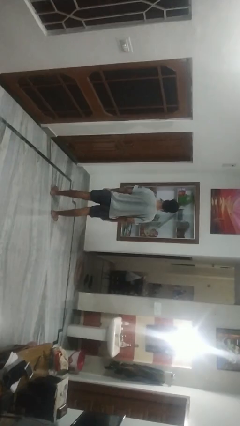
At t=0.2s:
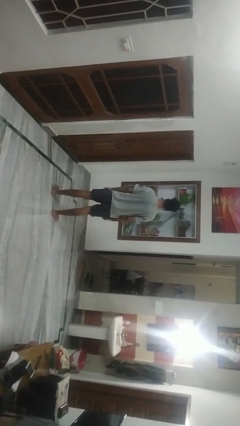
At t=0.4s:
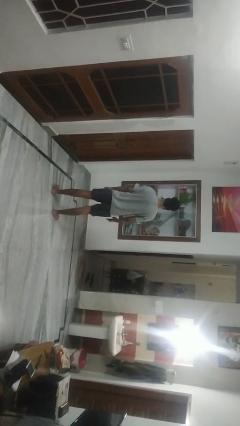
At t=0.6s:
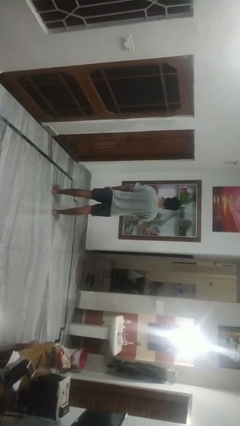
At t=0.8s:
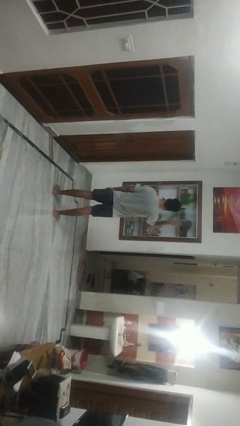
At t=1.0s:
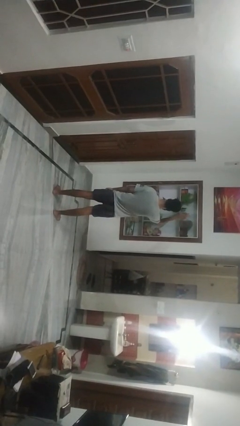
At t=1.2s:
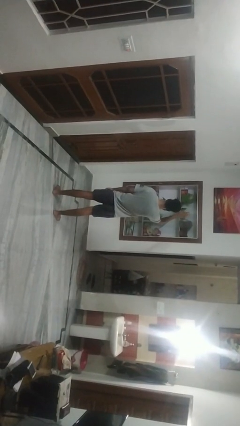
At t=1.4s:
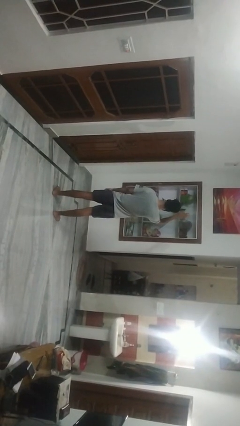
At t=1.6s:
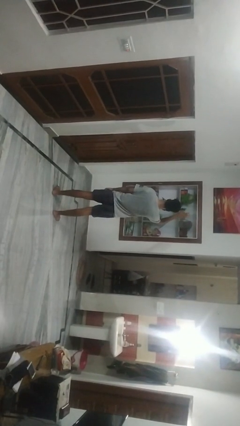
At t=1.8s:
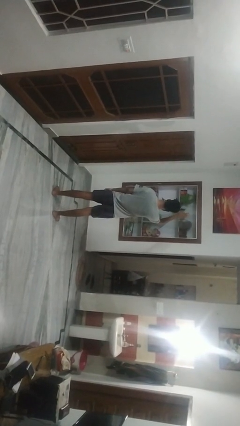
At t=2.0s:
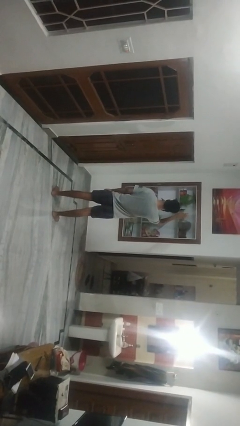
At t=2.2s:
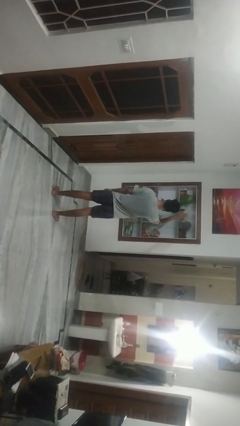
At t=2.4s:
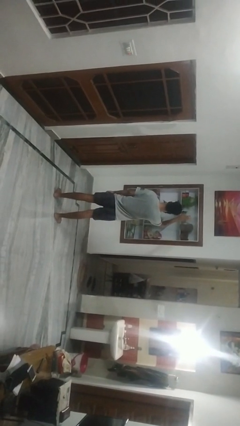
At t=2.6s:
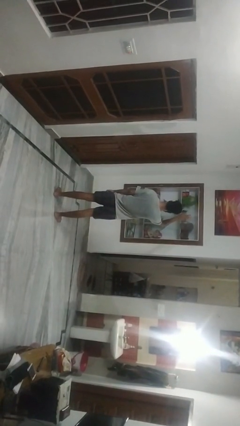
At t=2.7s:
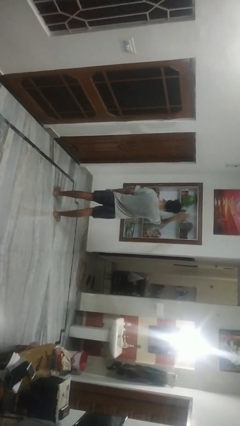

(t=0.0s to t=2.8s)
person gestures raise hand

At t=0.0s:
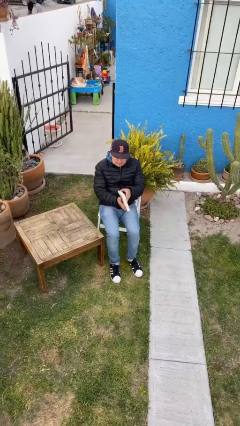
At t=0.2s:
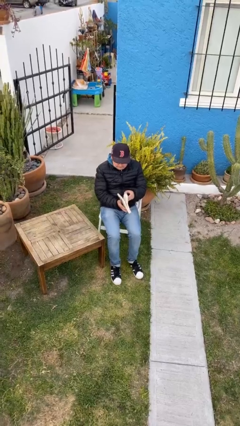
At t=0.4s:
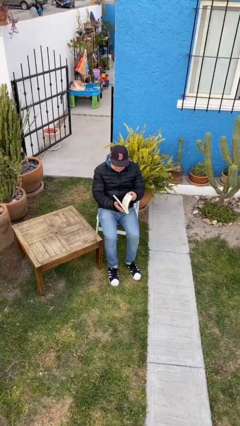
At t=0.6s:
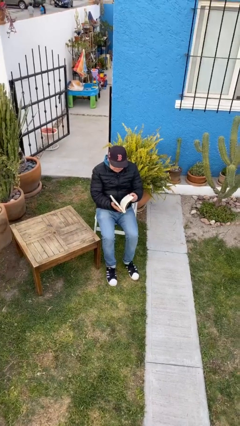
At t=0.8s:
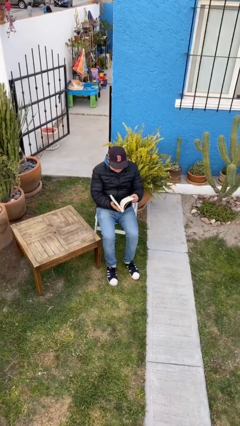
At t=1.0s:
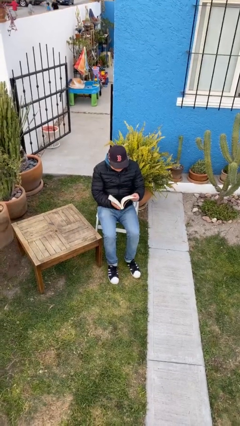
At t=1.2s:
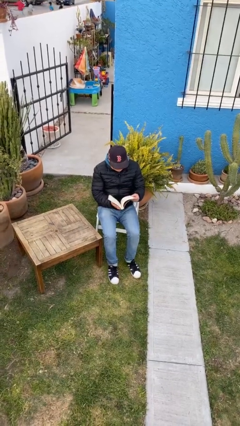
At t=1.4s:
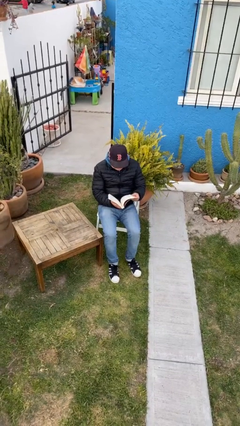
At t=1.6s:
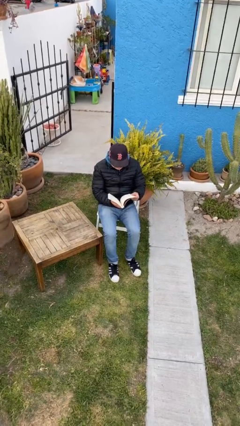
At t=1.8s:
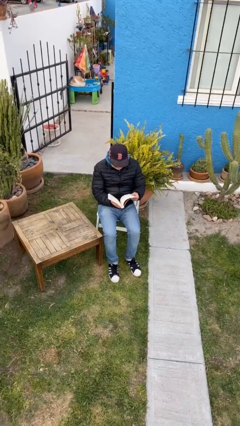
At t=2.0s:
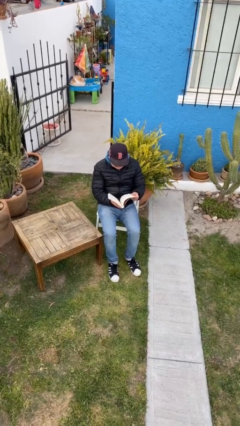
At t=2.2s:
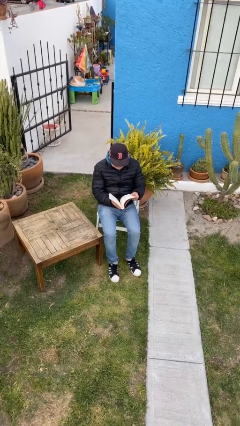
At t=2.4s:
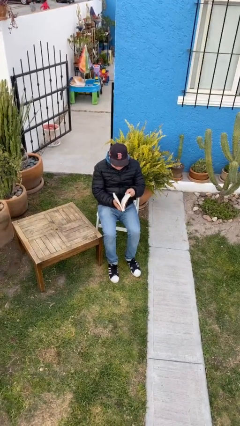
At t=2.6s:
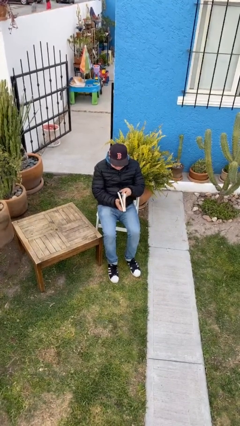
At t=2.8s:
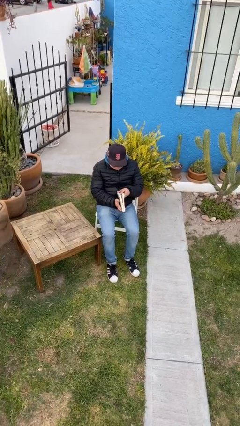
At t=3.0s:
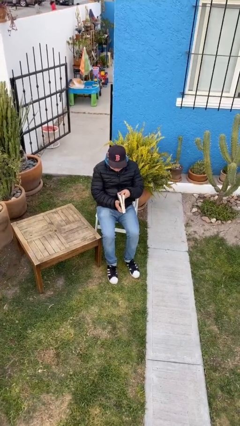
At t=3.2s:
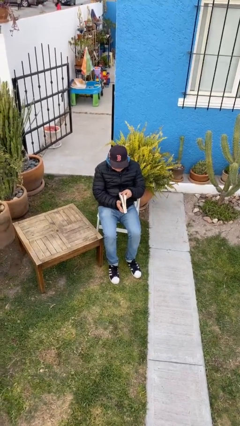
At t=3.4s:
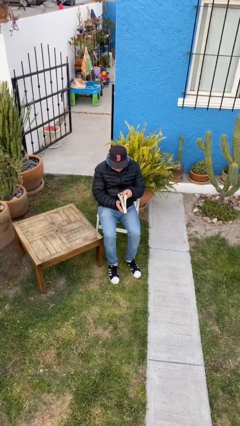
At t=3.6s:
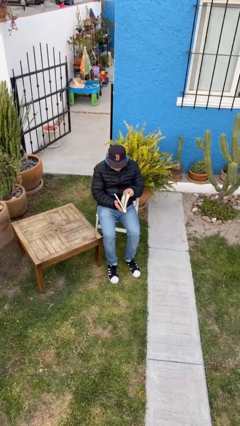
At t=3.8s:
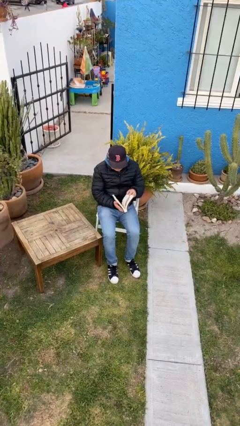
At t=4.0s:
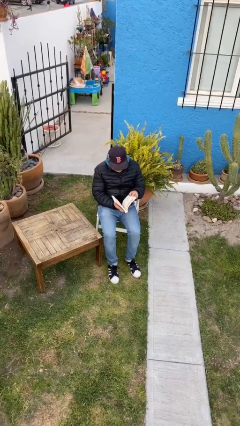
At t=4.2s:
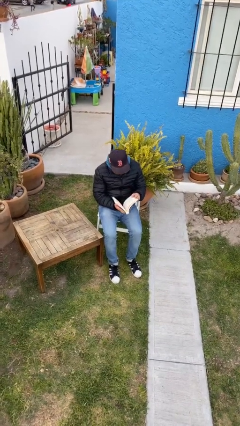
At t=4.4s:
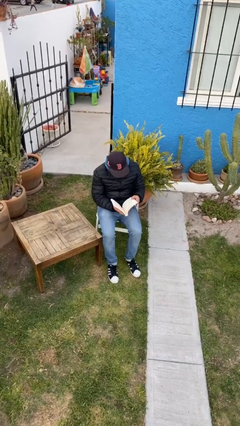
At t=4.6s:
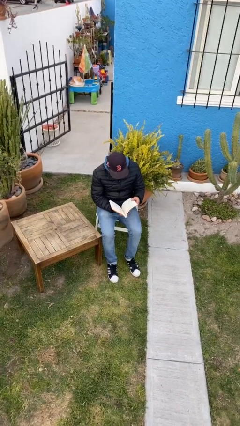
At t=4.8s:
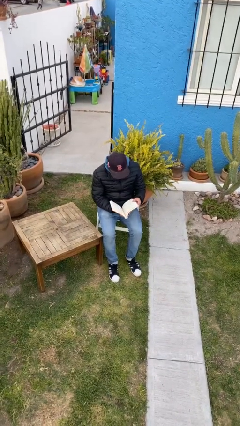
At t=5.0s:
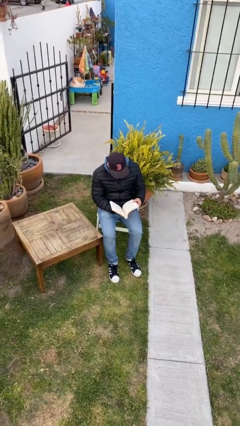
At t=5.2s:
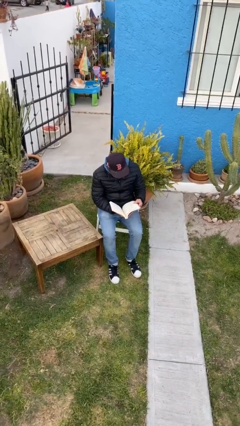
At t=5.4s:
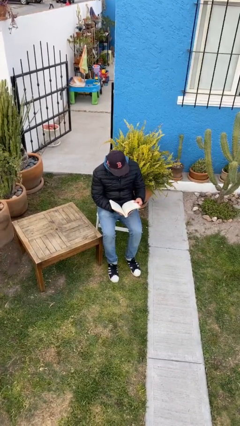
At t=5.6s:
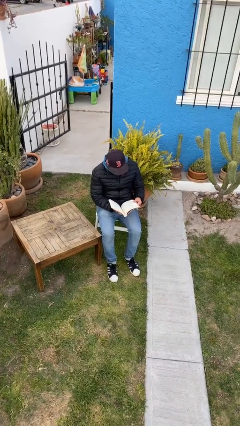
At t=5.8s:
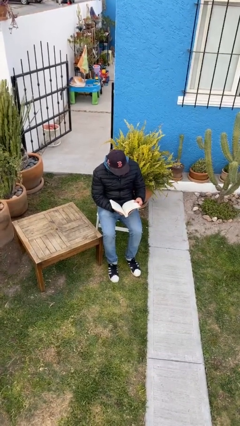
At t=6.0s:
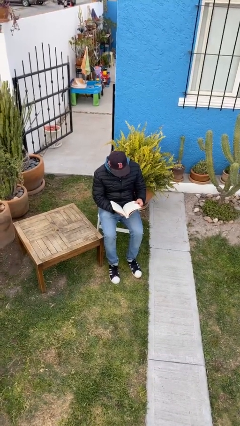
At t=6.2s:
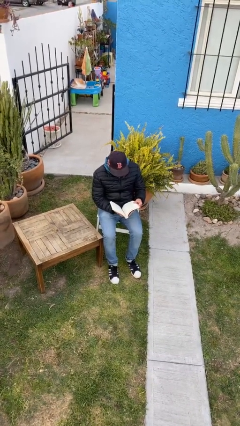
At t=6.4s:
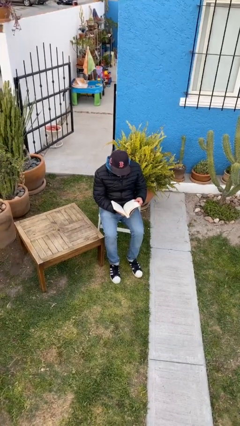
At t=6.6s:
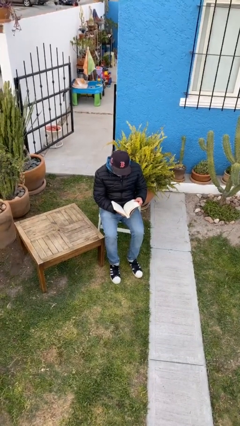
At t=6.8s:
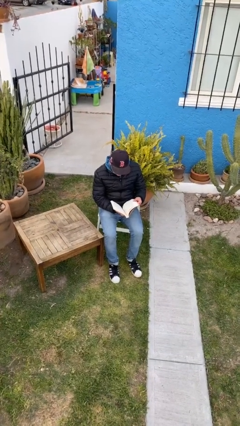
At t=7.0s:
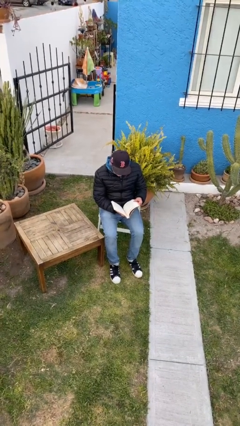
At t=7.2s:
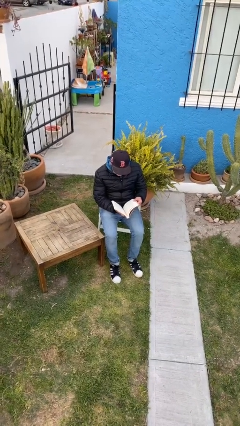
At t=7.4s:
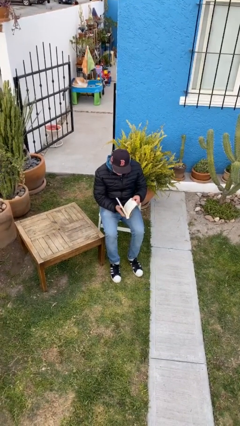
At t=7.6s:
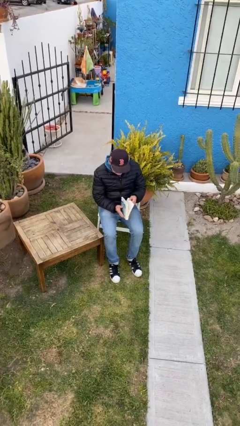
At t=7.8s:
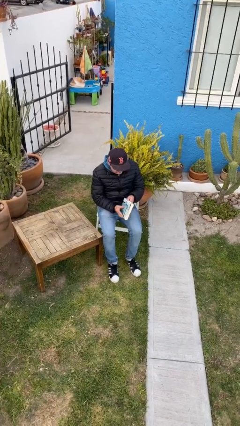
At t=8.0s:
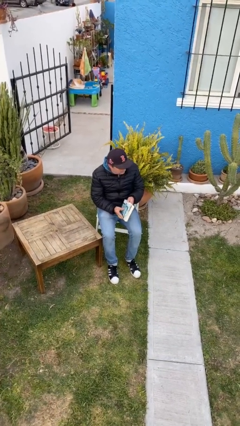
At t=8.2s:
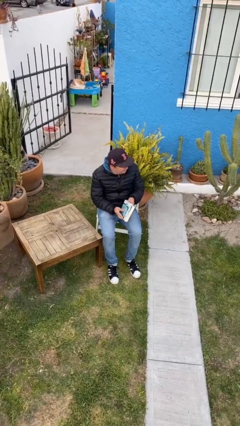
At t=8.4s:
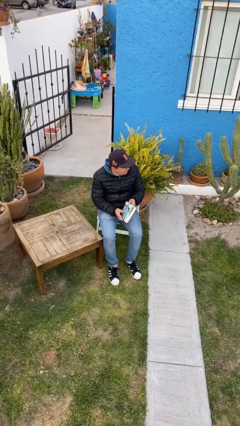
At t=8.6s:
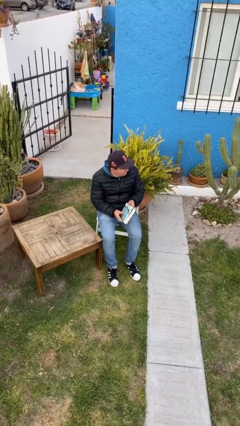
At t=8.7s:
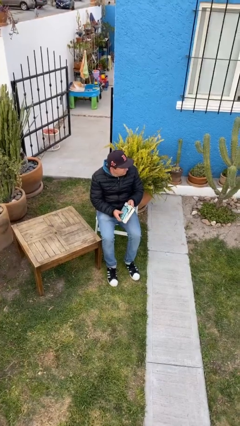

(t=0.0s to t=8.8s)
person reads document

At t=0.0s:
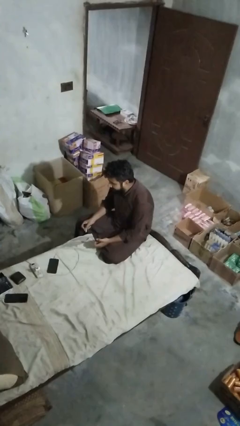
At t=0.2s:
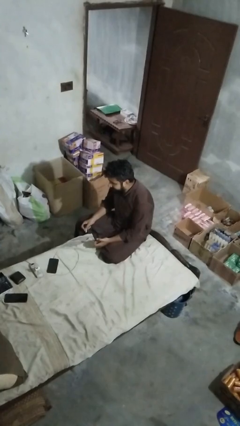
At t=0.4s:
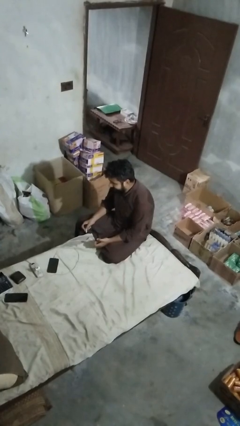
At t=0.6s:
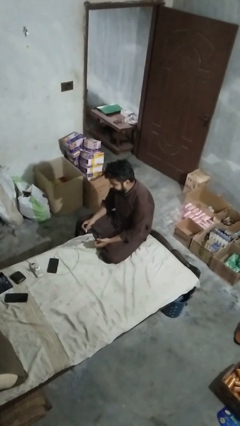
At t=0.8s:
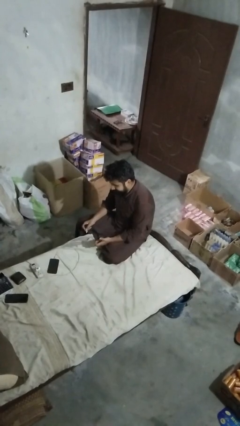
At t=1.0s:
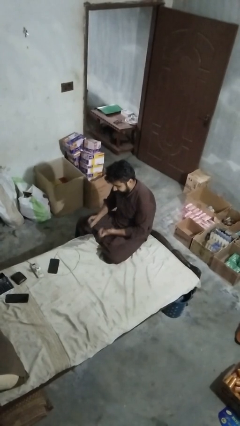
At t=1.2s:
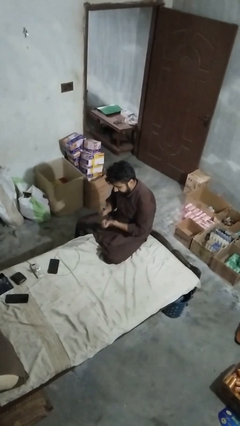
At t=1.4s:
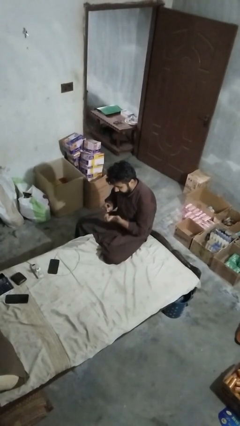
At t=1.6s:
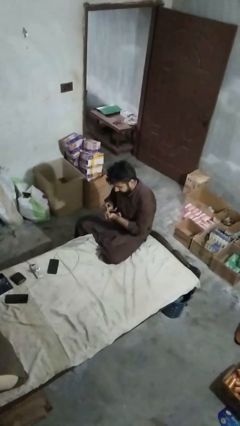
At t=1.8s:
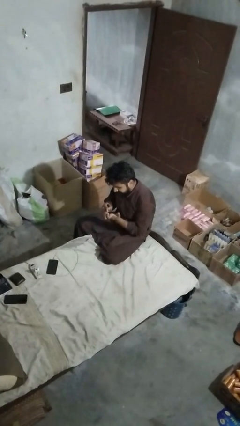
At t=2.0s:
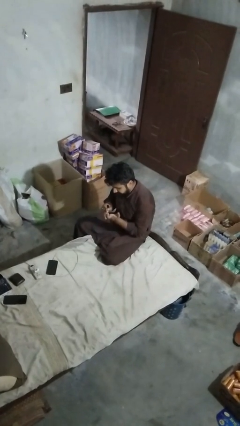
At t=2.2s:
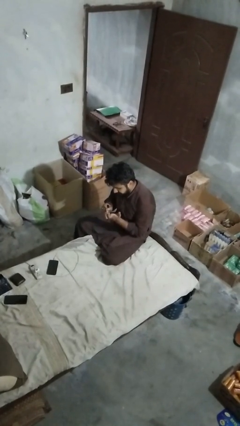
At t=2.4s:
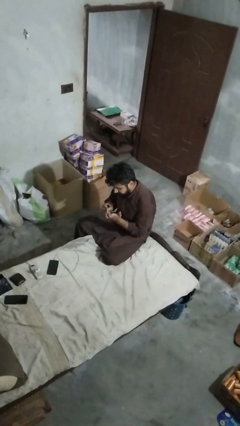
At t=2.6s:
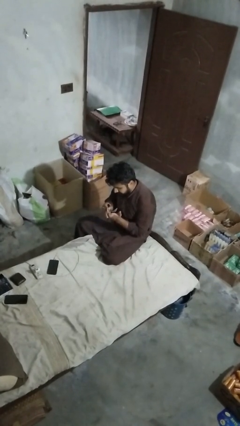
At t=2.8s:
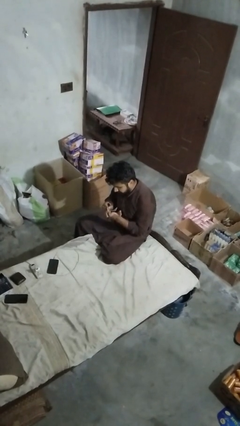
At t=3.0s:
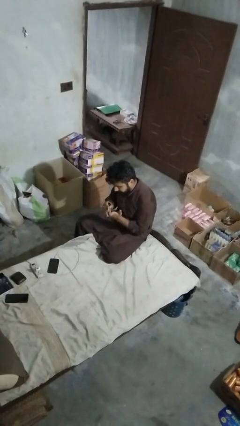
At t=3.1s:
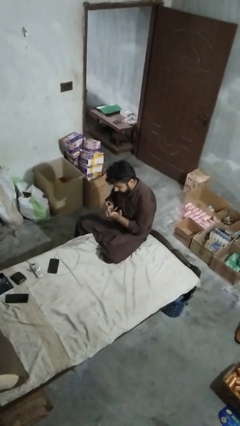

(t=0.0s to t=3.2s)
person paints fingernails

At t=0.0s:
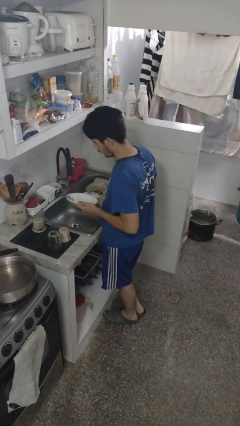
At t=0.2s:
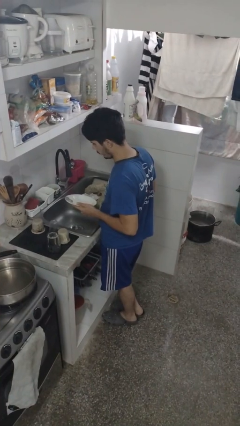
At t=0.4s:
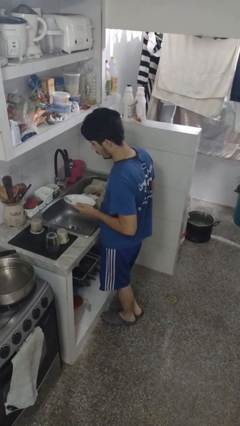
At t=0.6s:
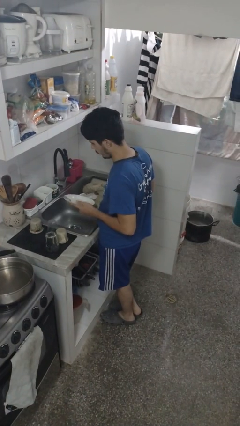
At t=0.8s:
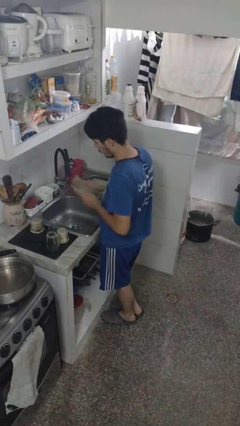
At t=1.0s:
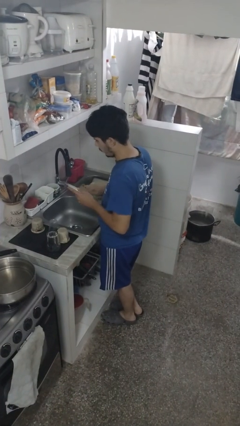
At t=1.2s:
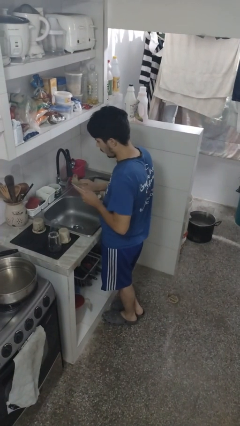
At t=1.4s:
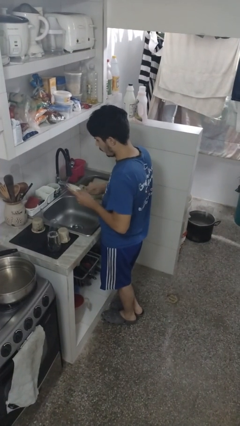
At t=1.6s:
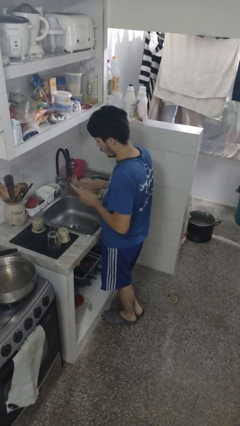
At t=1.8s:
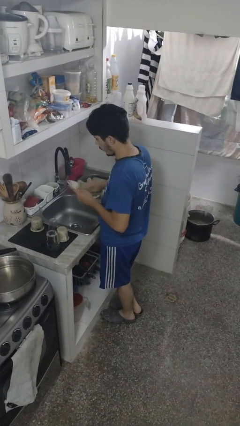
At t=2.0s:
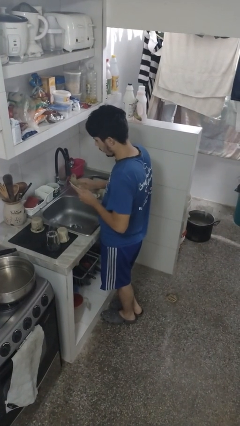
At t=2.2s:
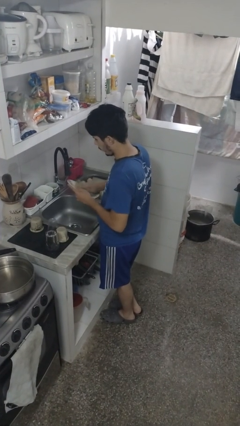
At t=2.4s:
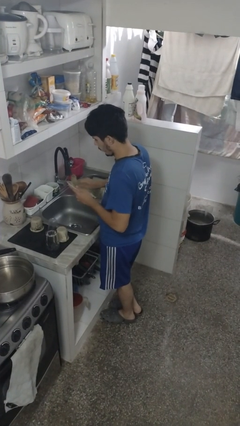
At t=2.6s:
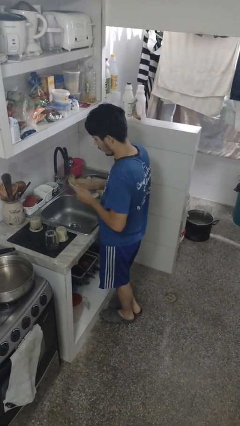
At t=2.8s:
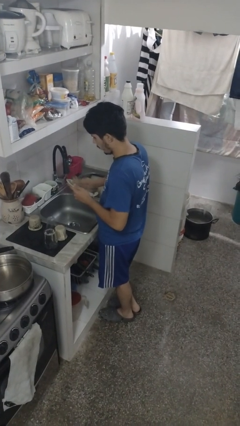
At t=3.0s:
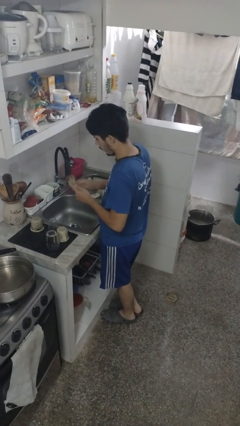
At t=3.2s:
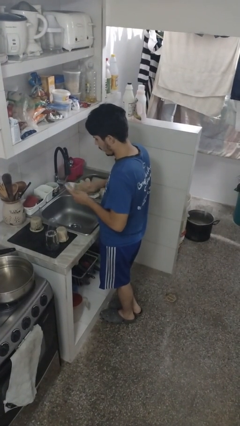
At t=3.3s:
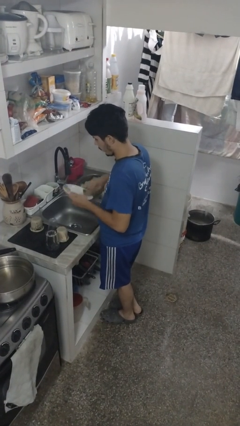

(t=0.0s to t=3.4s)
person dries dish
